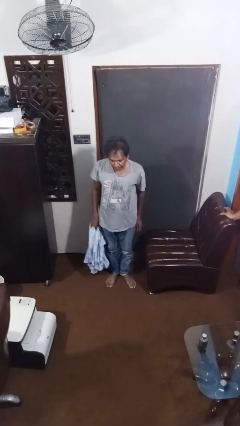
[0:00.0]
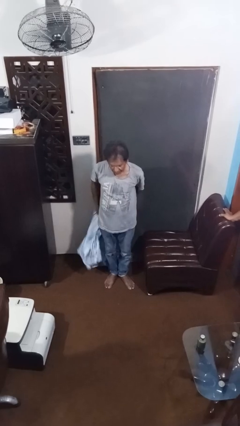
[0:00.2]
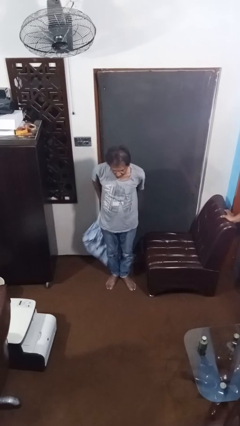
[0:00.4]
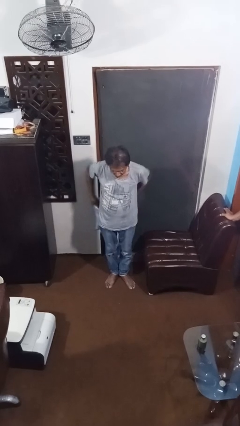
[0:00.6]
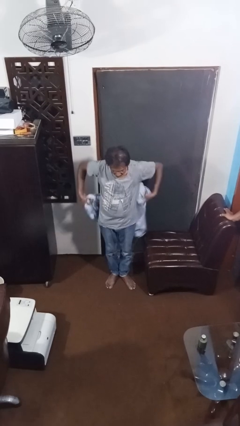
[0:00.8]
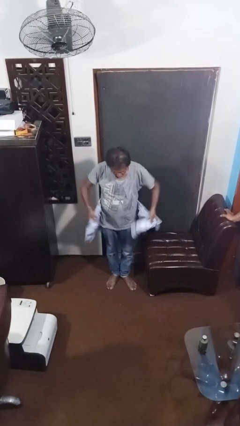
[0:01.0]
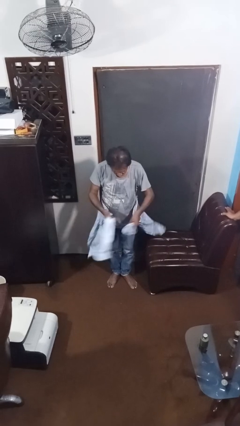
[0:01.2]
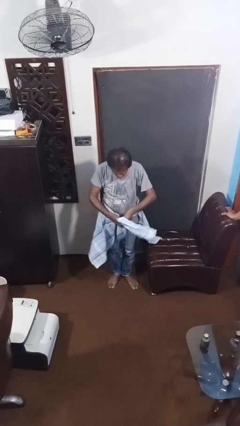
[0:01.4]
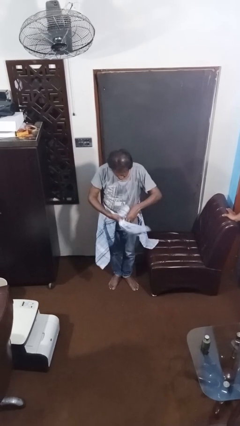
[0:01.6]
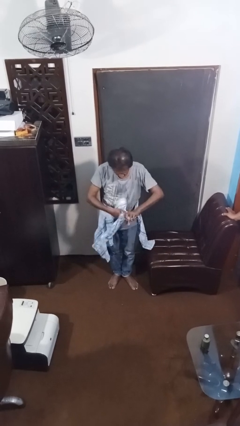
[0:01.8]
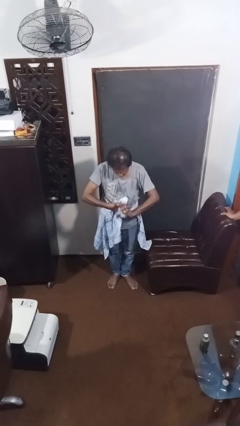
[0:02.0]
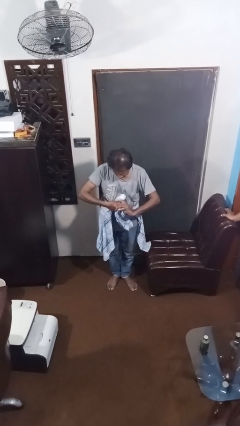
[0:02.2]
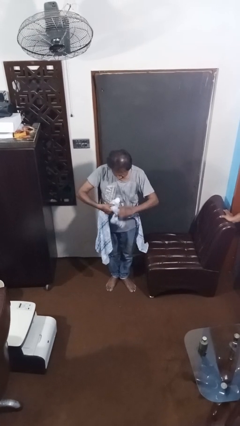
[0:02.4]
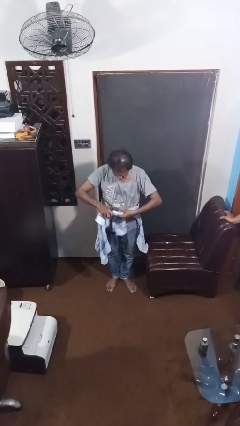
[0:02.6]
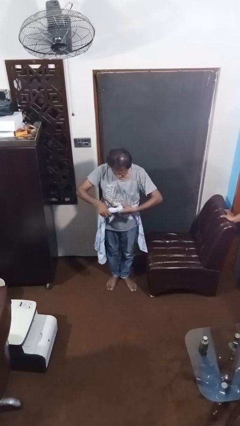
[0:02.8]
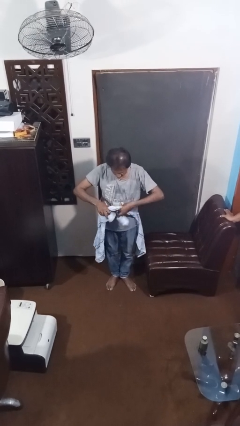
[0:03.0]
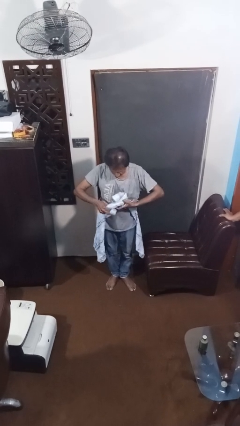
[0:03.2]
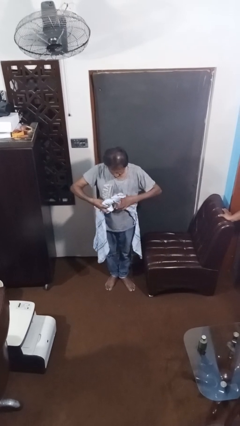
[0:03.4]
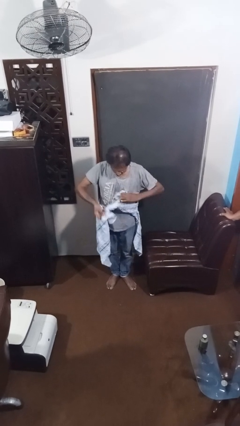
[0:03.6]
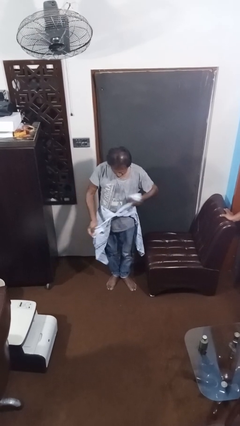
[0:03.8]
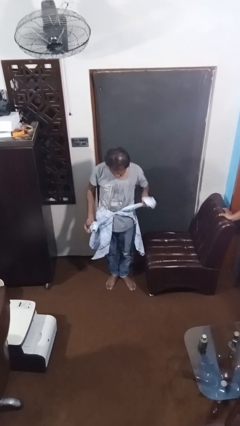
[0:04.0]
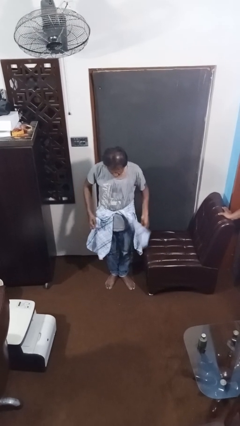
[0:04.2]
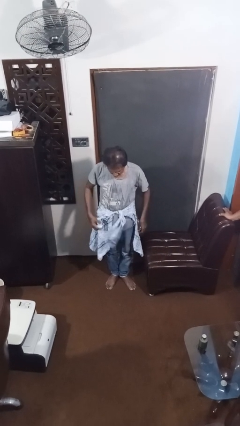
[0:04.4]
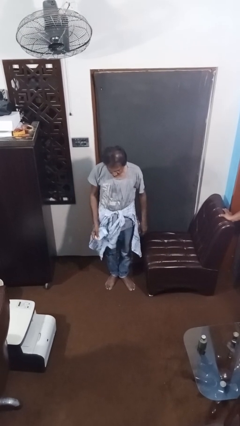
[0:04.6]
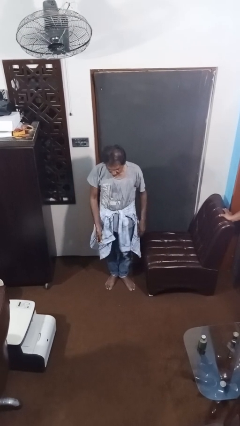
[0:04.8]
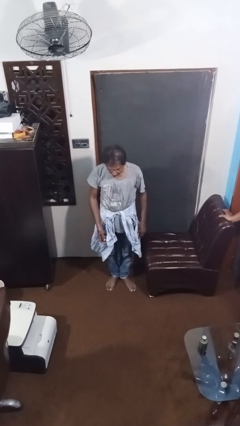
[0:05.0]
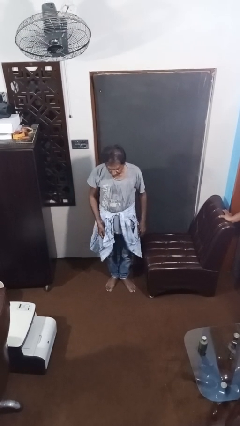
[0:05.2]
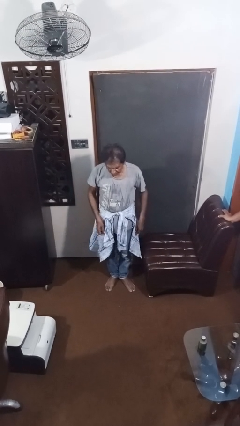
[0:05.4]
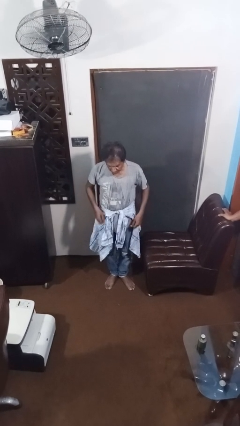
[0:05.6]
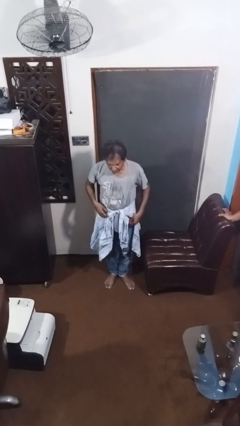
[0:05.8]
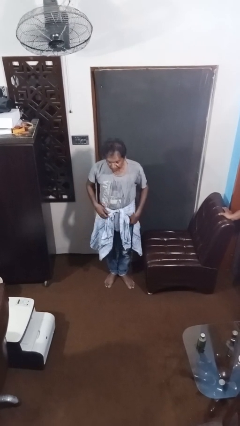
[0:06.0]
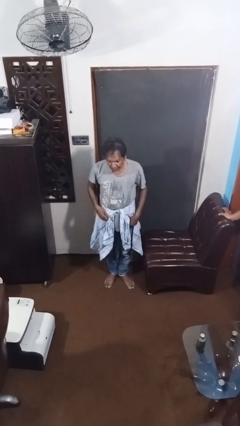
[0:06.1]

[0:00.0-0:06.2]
person ties jacket around waist

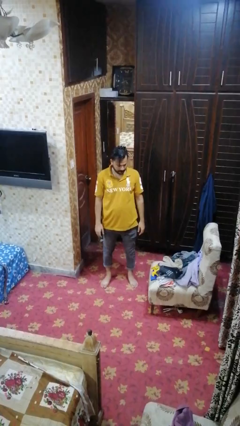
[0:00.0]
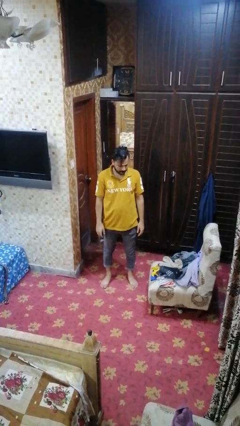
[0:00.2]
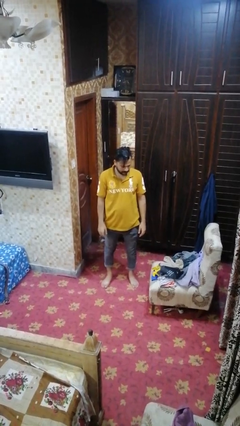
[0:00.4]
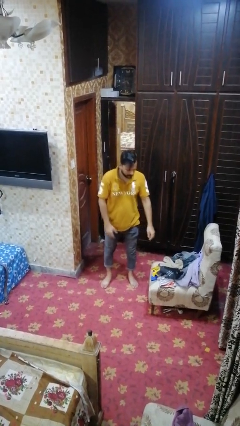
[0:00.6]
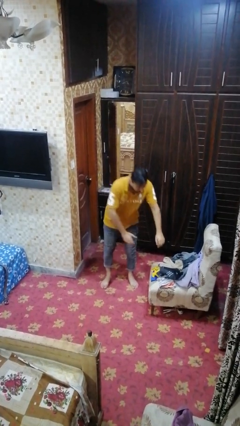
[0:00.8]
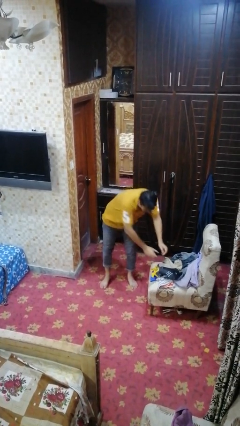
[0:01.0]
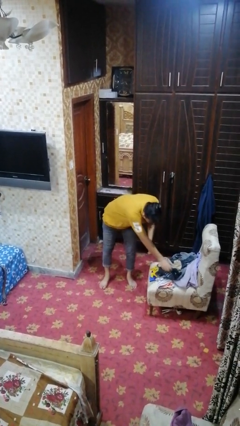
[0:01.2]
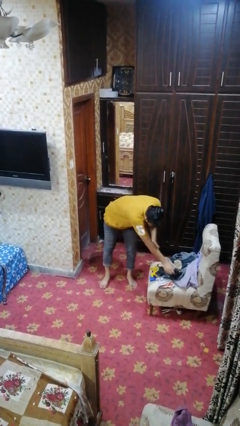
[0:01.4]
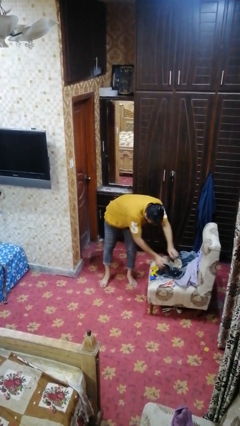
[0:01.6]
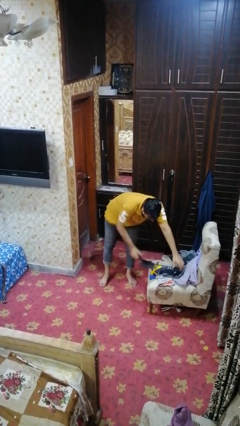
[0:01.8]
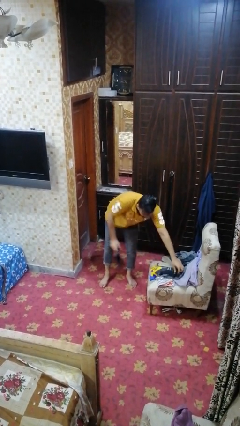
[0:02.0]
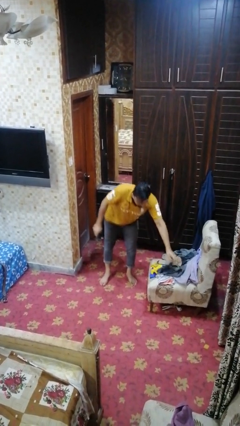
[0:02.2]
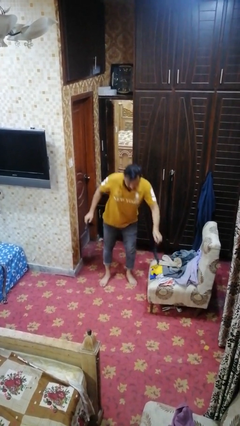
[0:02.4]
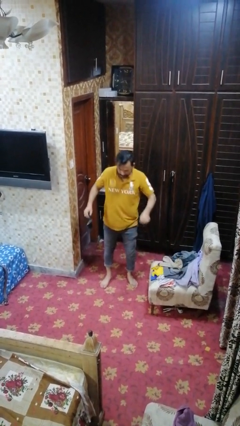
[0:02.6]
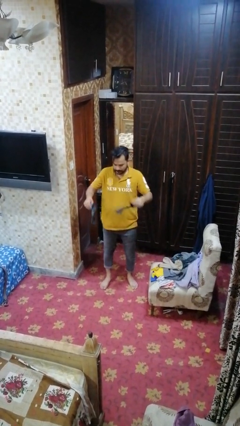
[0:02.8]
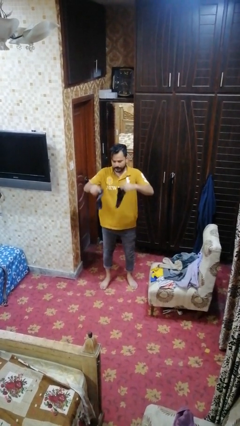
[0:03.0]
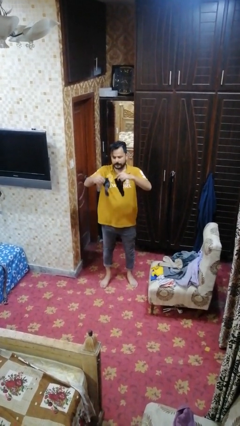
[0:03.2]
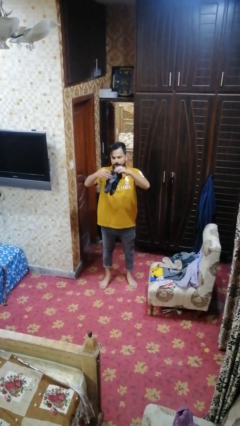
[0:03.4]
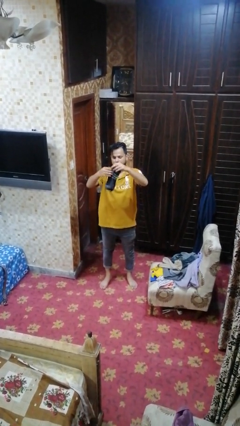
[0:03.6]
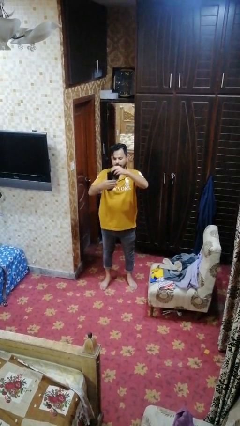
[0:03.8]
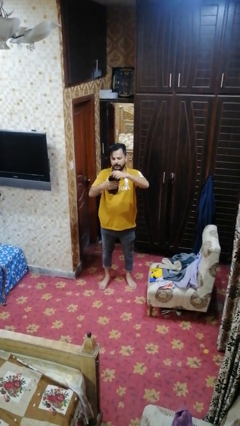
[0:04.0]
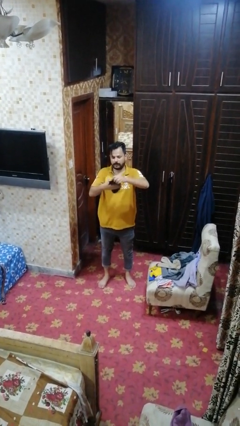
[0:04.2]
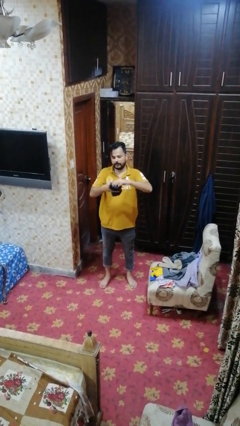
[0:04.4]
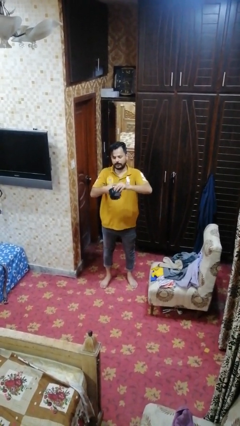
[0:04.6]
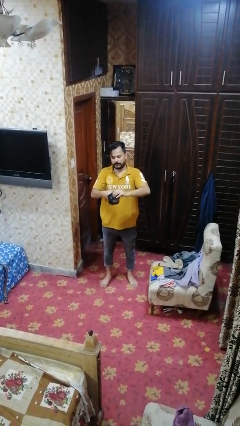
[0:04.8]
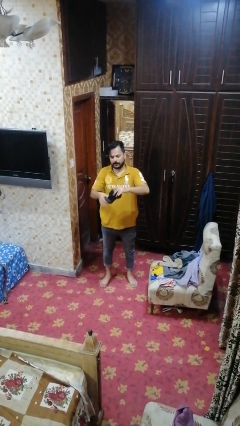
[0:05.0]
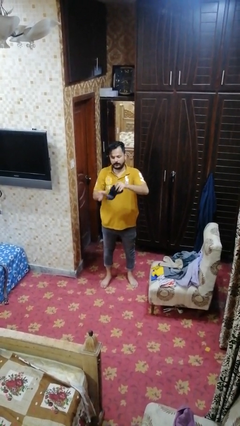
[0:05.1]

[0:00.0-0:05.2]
person folds socks

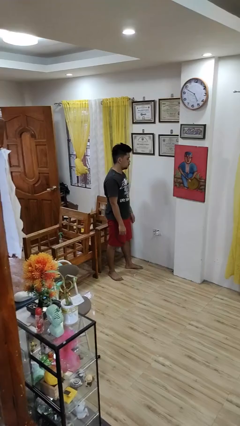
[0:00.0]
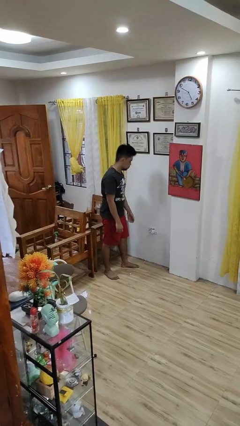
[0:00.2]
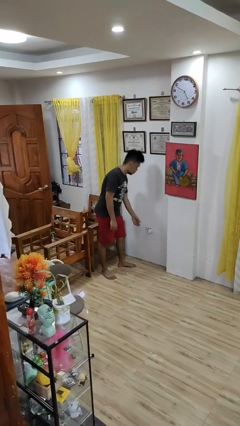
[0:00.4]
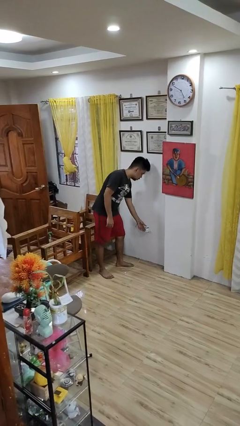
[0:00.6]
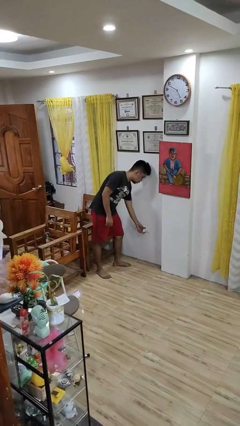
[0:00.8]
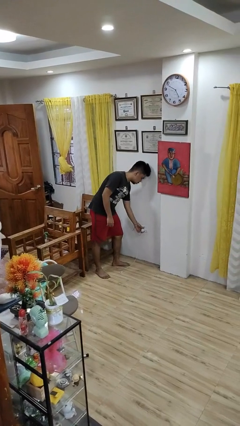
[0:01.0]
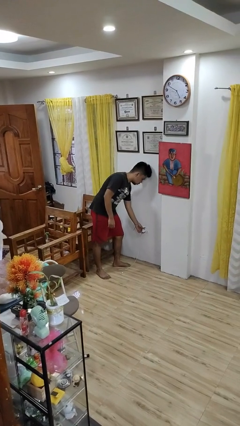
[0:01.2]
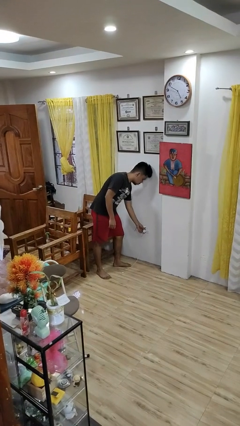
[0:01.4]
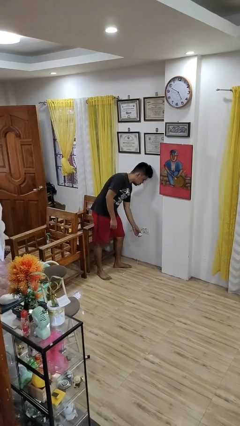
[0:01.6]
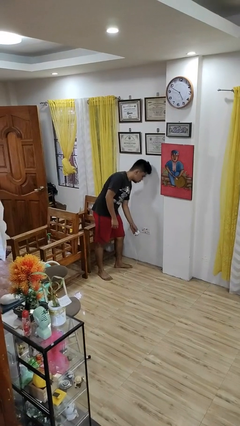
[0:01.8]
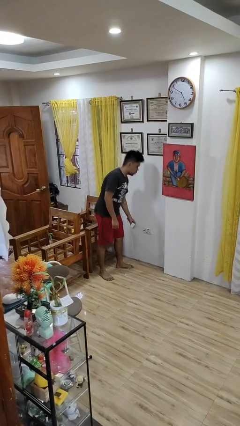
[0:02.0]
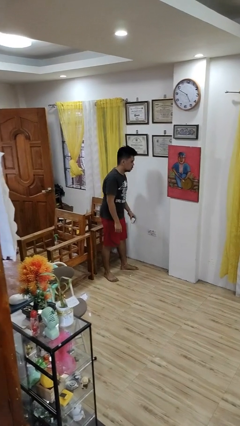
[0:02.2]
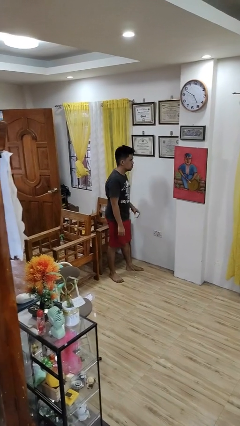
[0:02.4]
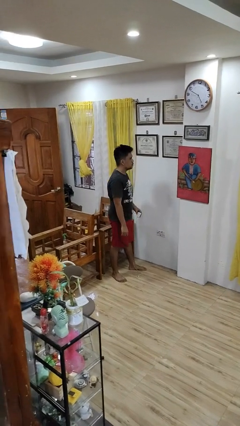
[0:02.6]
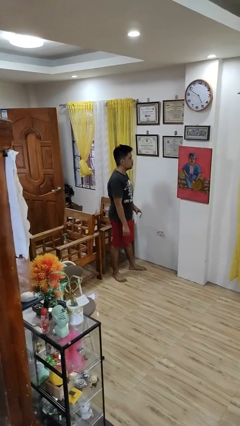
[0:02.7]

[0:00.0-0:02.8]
person unplugs from electrical socket

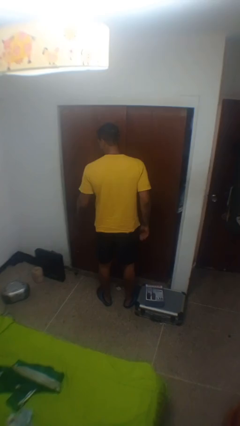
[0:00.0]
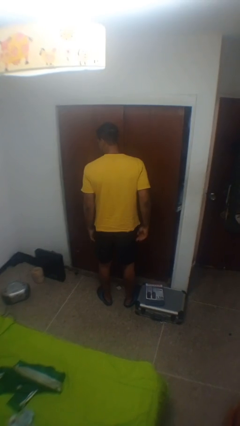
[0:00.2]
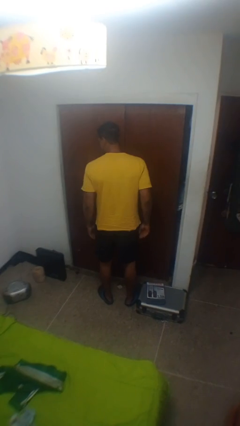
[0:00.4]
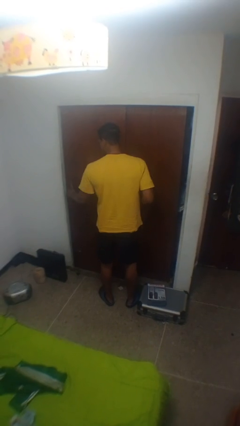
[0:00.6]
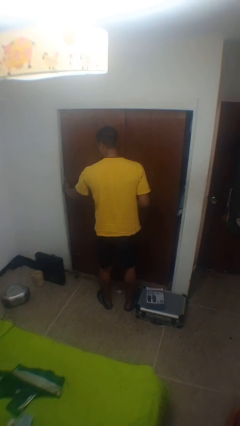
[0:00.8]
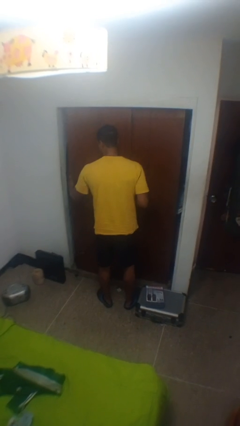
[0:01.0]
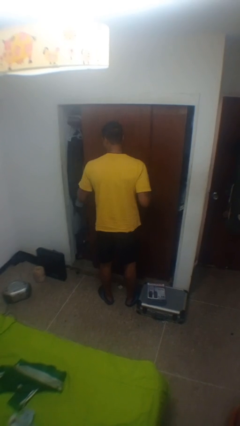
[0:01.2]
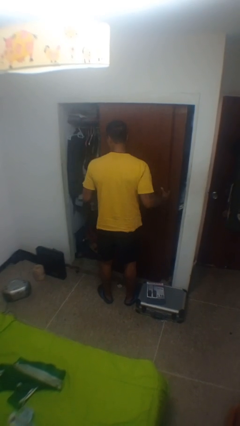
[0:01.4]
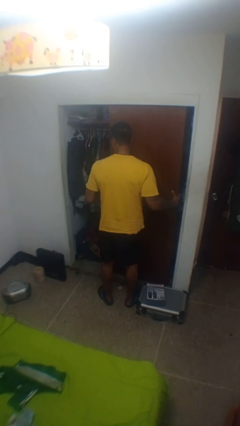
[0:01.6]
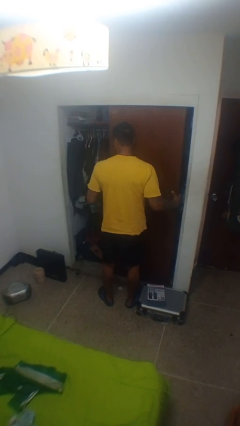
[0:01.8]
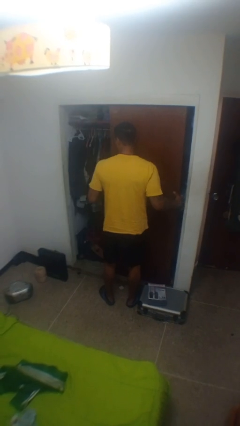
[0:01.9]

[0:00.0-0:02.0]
person opens closet door

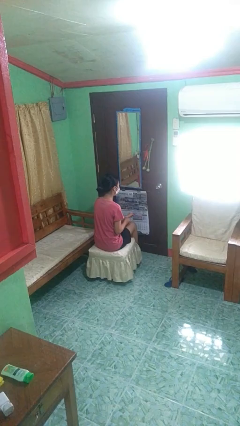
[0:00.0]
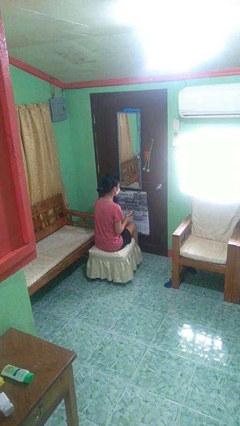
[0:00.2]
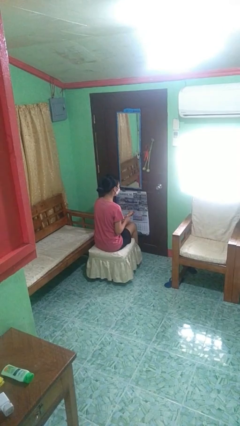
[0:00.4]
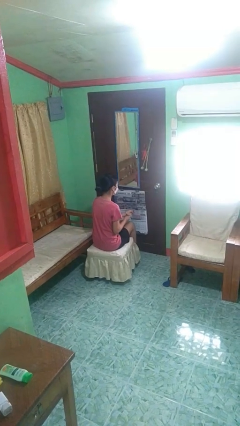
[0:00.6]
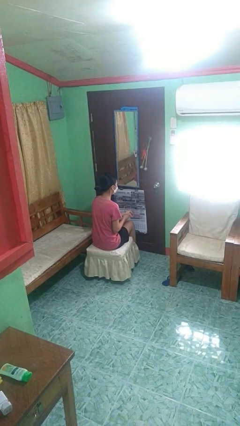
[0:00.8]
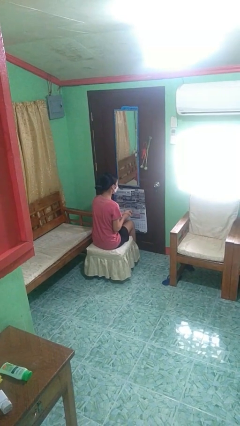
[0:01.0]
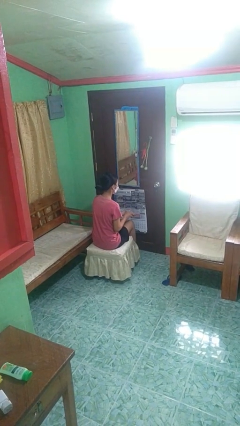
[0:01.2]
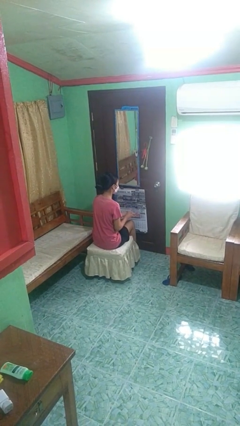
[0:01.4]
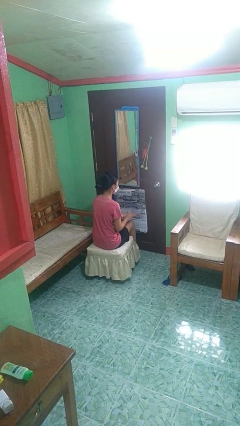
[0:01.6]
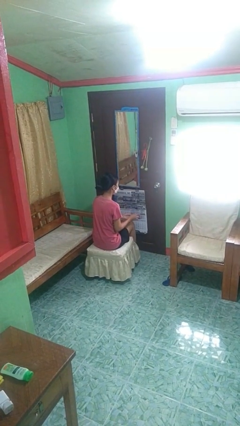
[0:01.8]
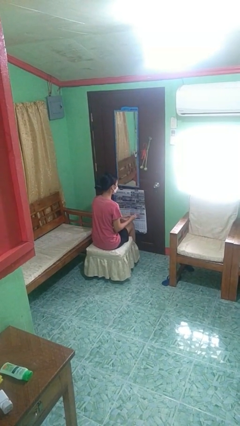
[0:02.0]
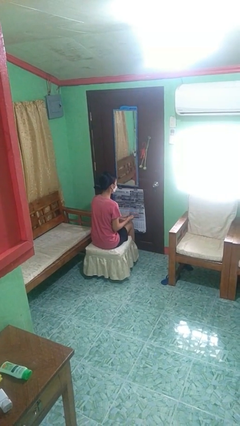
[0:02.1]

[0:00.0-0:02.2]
person takes off wristwatch
